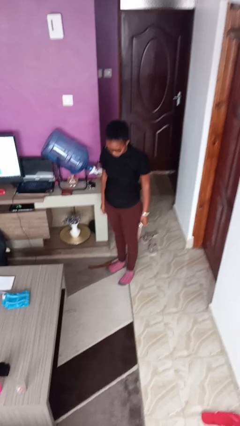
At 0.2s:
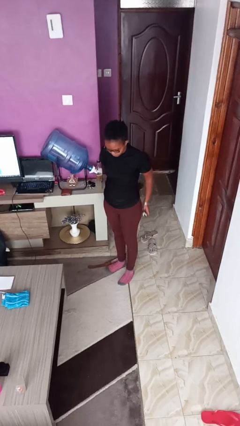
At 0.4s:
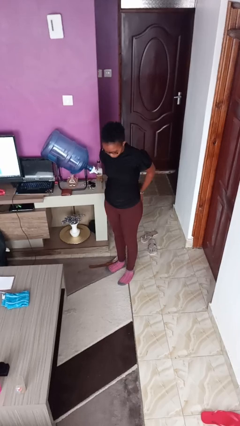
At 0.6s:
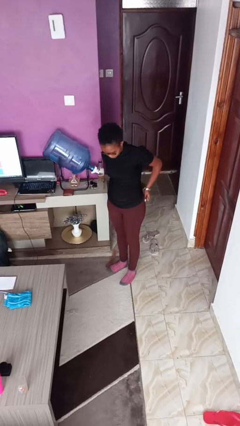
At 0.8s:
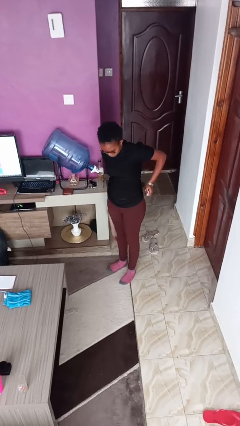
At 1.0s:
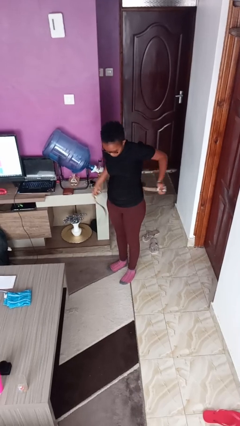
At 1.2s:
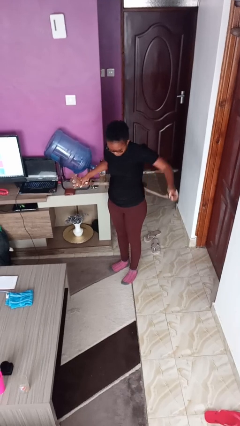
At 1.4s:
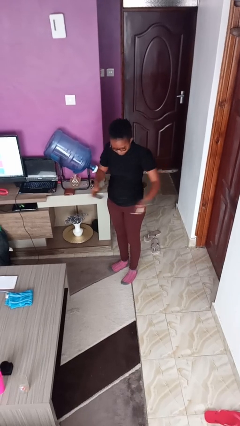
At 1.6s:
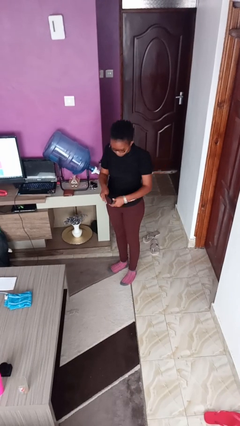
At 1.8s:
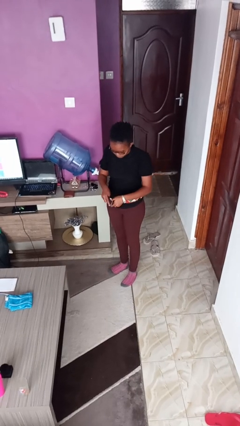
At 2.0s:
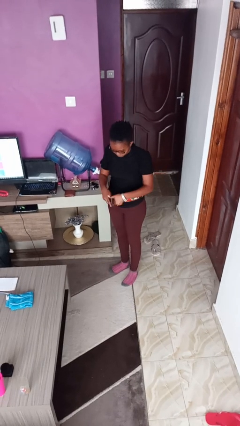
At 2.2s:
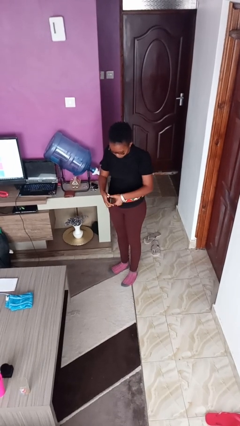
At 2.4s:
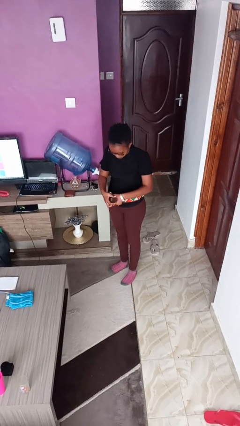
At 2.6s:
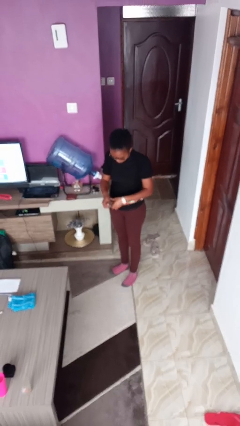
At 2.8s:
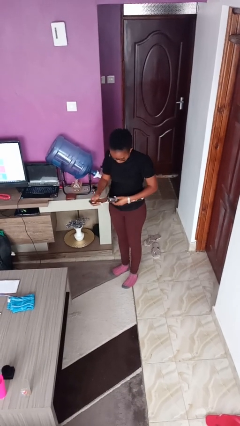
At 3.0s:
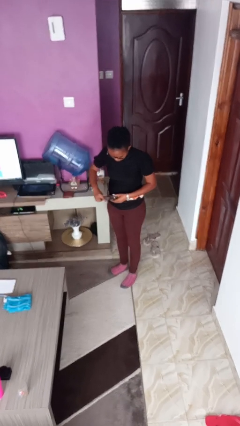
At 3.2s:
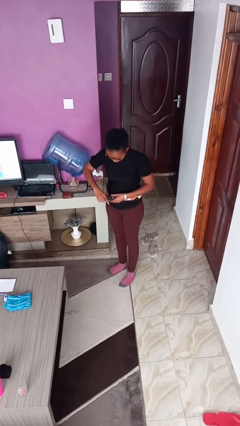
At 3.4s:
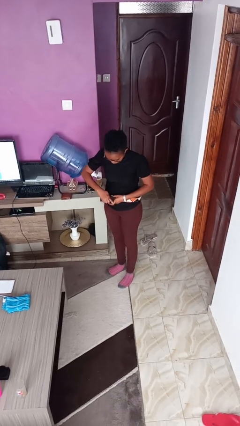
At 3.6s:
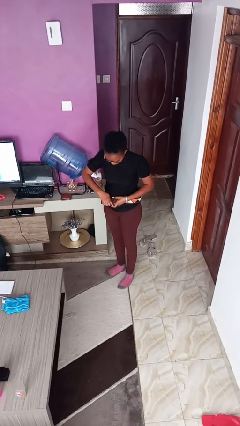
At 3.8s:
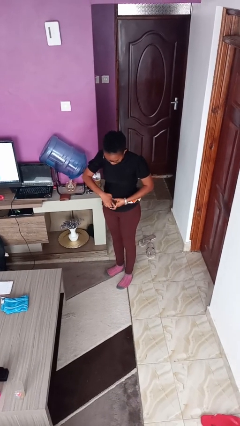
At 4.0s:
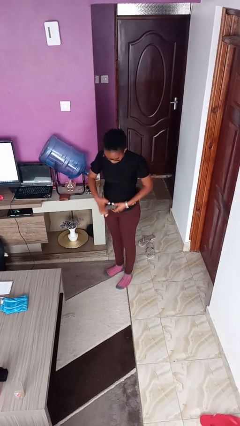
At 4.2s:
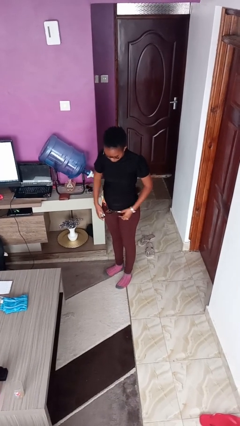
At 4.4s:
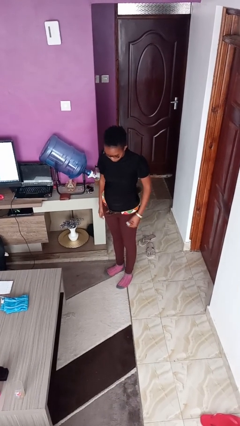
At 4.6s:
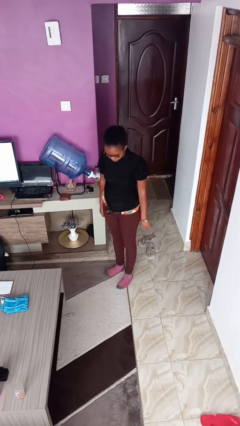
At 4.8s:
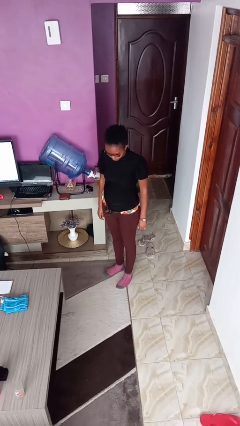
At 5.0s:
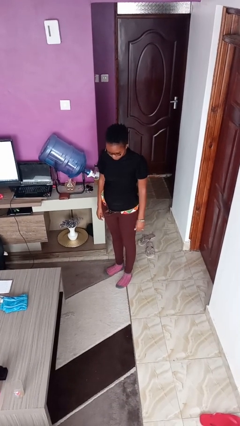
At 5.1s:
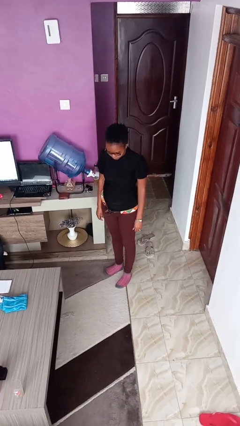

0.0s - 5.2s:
person puts on belt

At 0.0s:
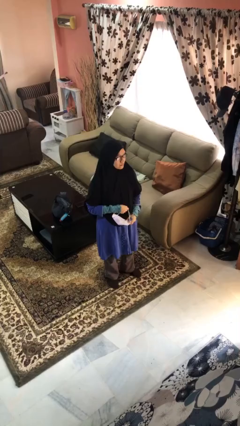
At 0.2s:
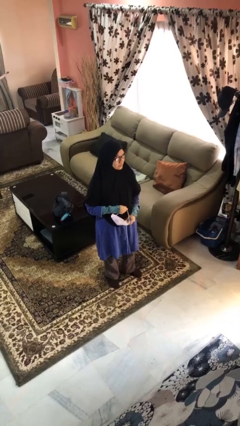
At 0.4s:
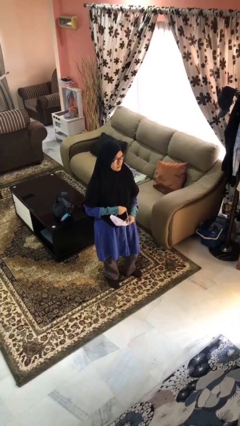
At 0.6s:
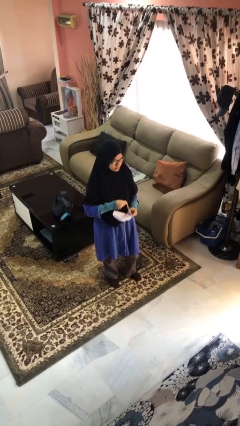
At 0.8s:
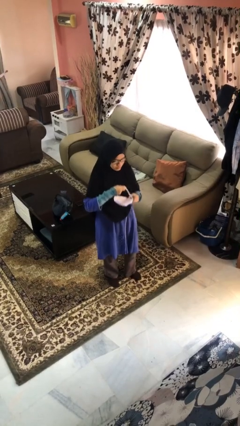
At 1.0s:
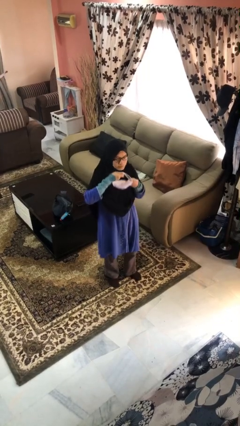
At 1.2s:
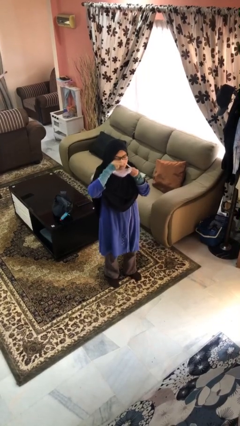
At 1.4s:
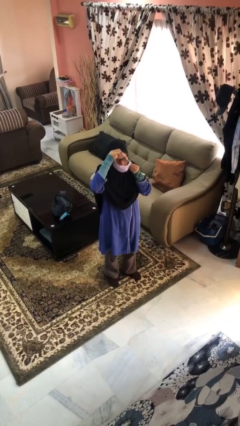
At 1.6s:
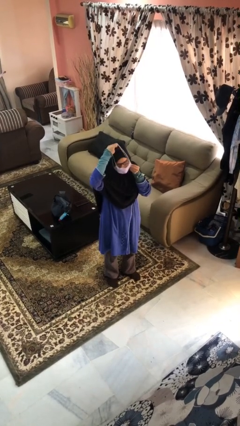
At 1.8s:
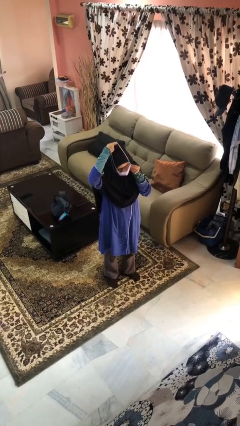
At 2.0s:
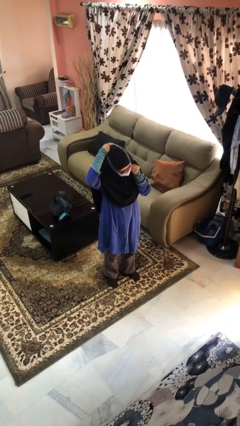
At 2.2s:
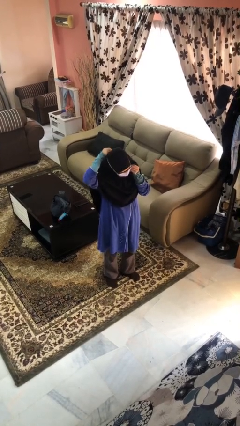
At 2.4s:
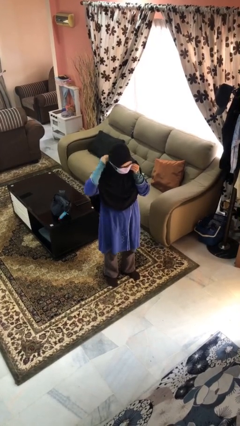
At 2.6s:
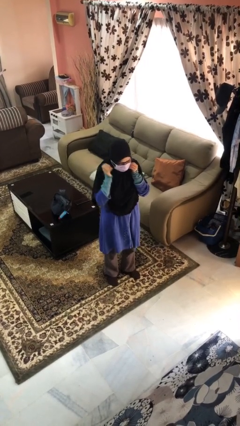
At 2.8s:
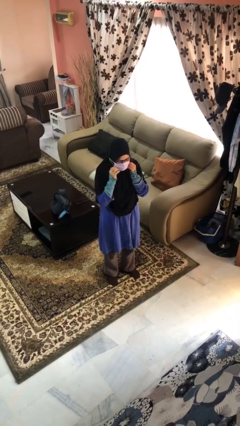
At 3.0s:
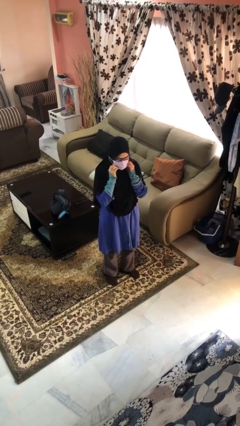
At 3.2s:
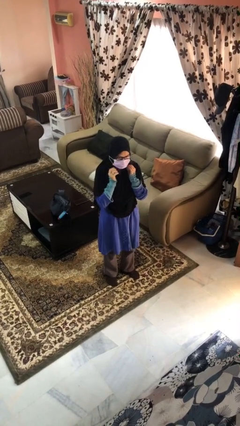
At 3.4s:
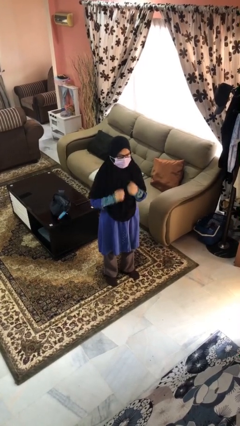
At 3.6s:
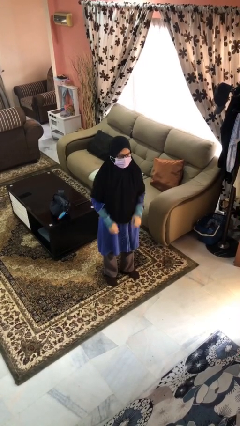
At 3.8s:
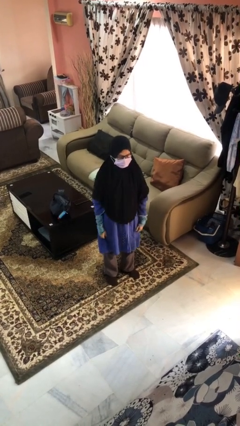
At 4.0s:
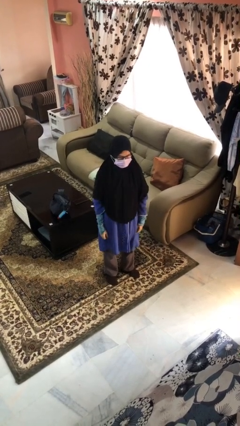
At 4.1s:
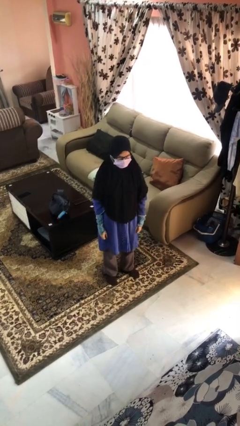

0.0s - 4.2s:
person puts on facemask

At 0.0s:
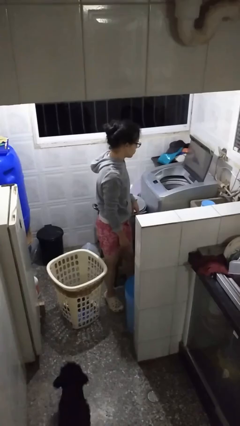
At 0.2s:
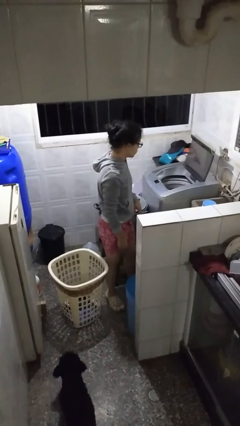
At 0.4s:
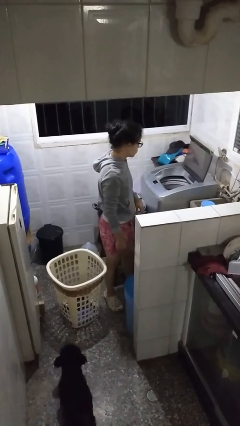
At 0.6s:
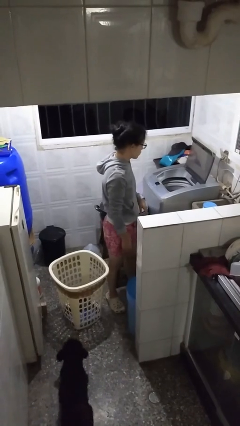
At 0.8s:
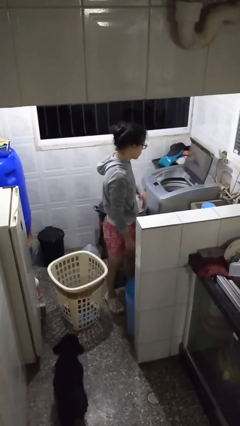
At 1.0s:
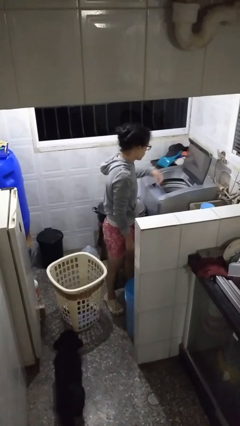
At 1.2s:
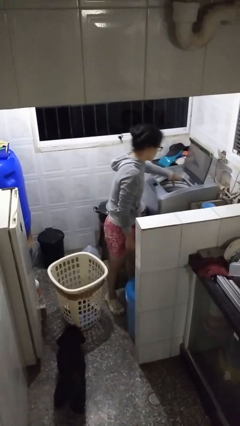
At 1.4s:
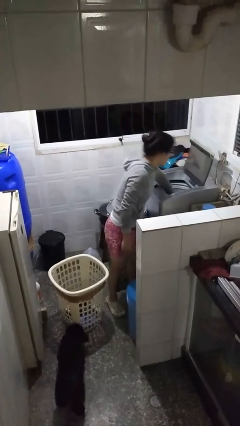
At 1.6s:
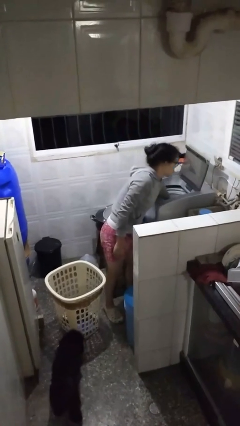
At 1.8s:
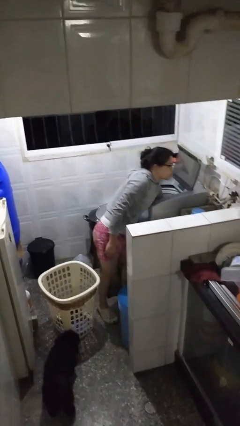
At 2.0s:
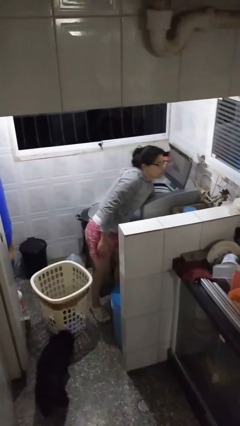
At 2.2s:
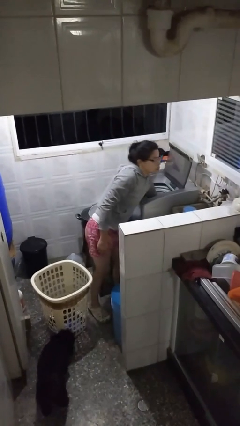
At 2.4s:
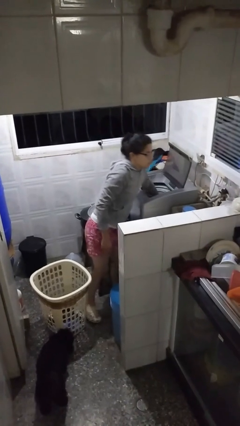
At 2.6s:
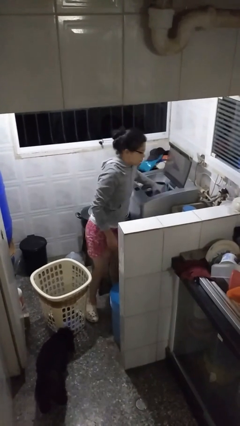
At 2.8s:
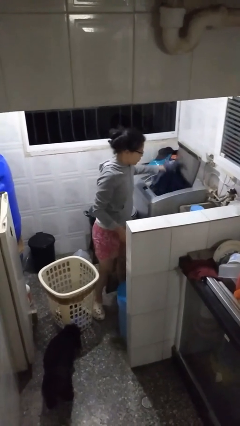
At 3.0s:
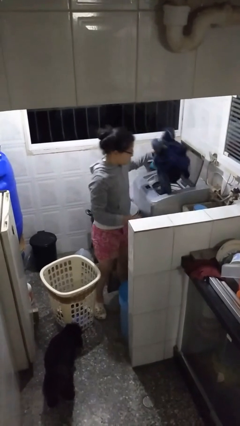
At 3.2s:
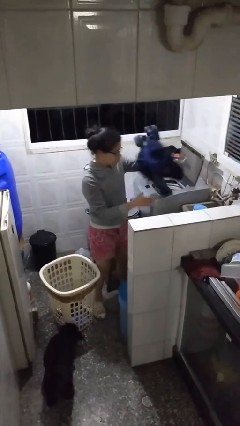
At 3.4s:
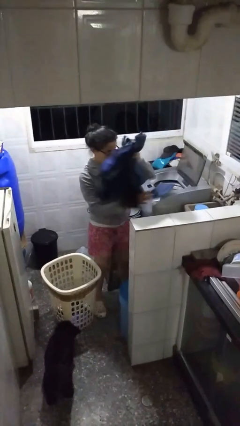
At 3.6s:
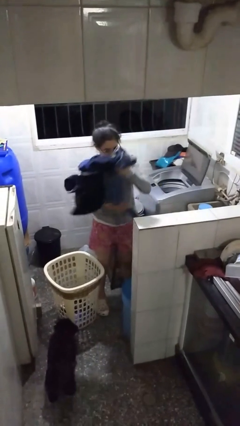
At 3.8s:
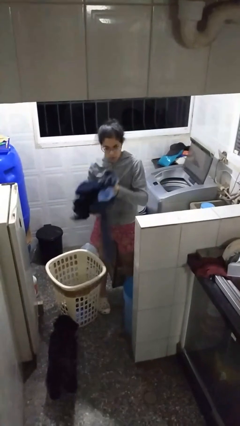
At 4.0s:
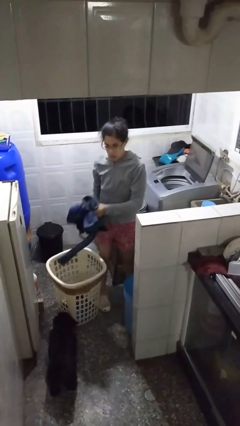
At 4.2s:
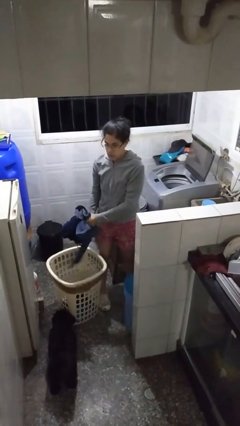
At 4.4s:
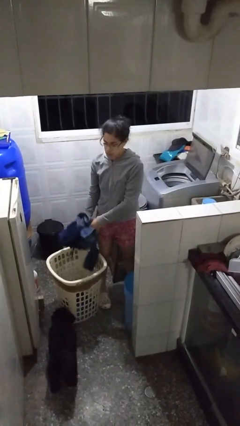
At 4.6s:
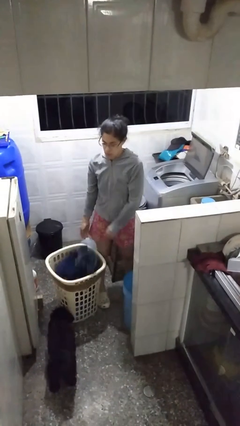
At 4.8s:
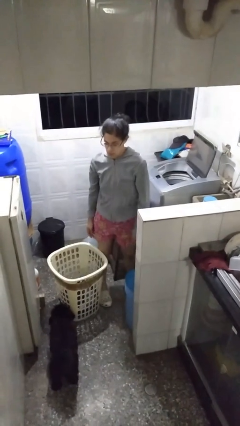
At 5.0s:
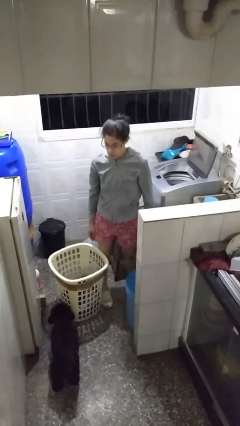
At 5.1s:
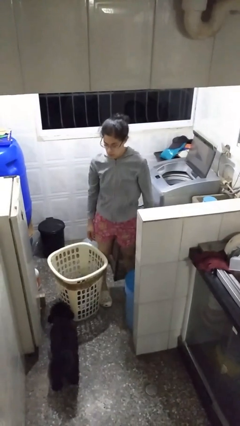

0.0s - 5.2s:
person loads clotheswasher

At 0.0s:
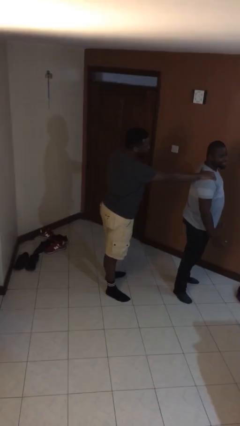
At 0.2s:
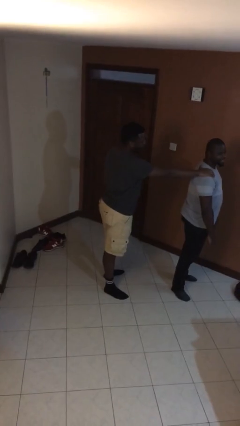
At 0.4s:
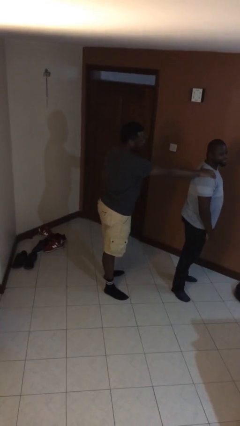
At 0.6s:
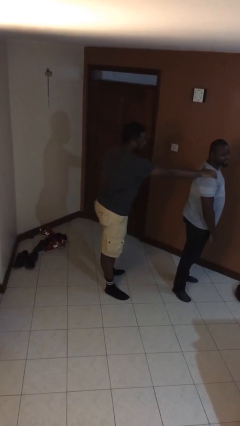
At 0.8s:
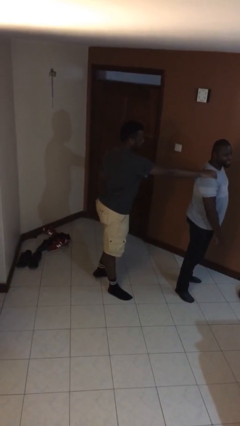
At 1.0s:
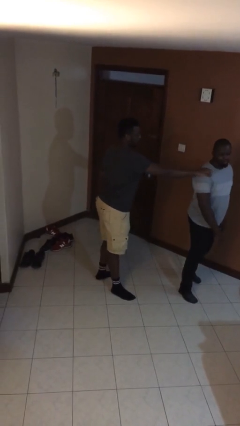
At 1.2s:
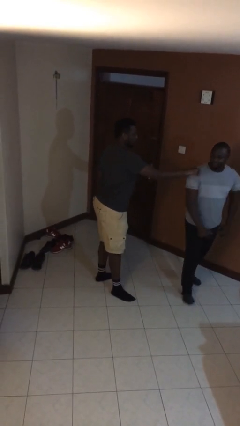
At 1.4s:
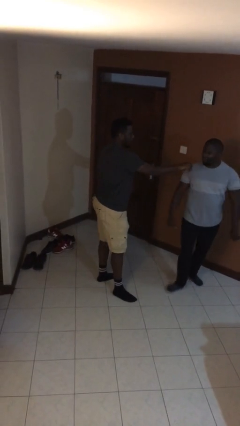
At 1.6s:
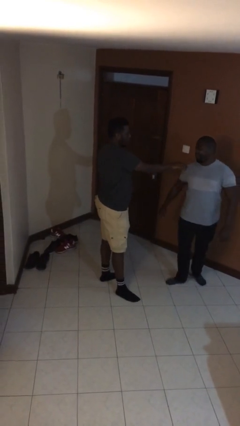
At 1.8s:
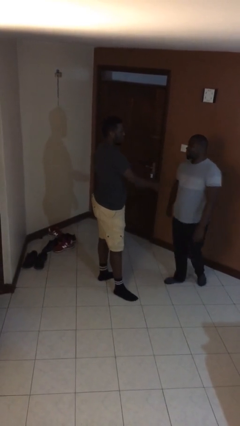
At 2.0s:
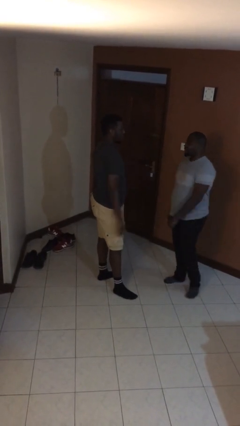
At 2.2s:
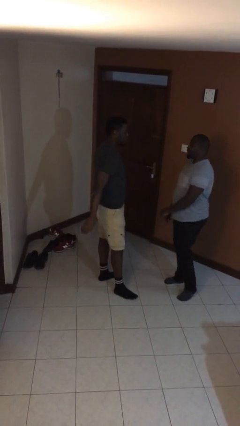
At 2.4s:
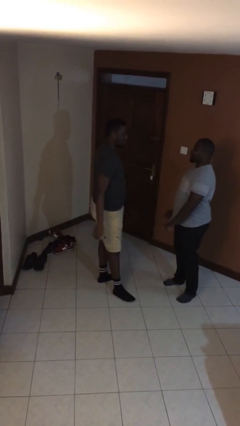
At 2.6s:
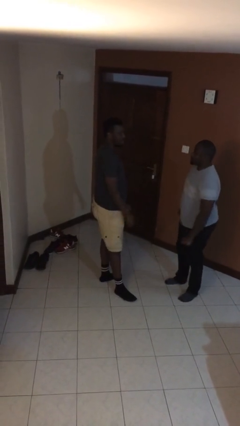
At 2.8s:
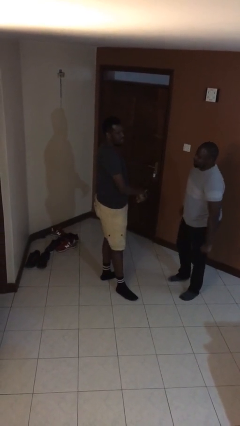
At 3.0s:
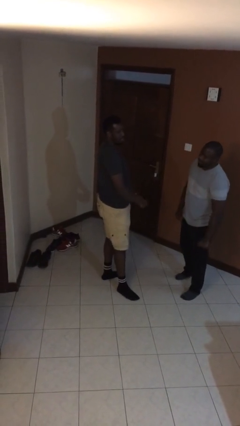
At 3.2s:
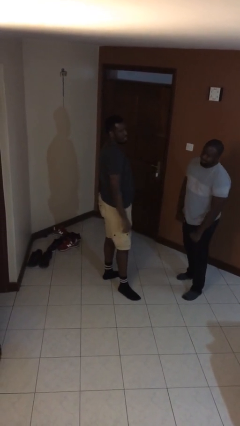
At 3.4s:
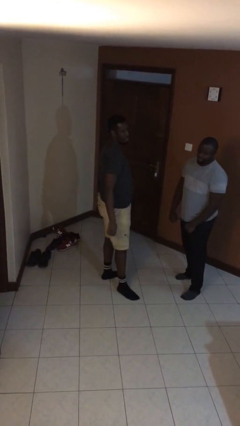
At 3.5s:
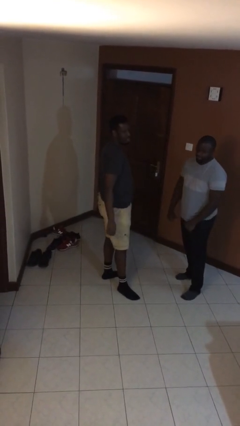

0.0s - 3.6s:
person spins person around
